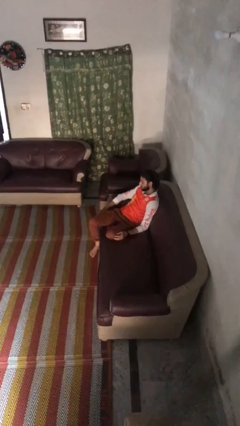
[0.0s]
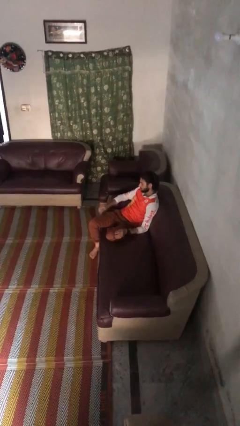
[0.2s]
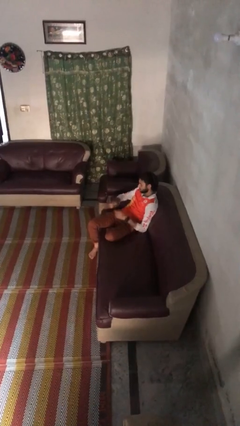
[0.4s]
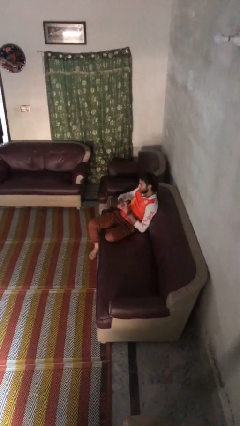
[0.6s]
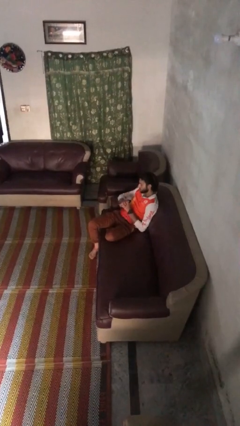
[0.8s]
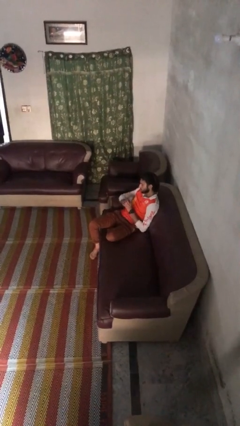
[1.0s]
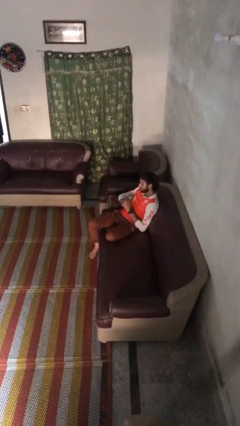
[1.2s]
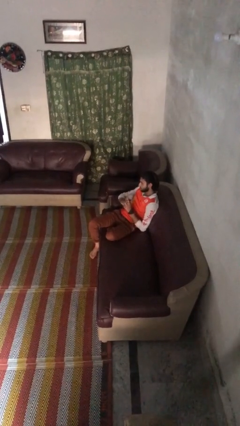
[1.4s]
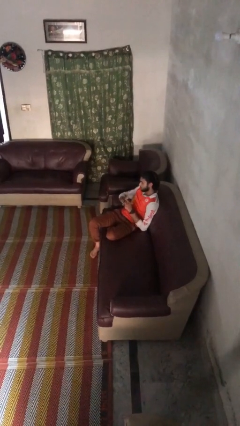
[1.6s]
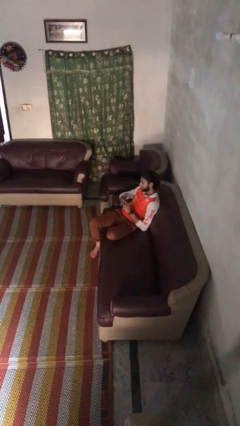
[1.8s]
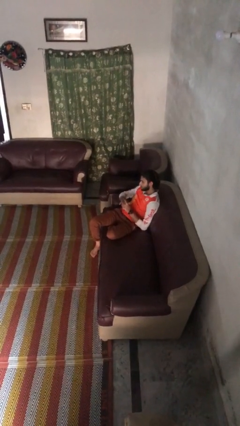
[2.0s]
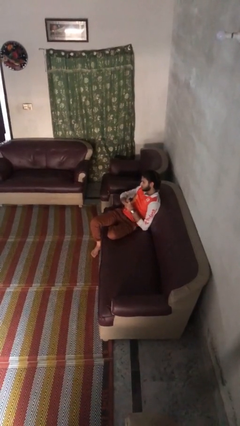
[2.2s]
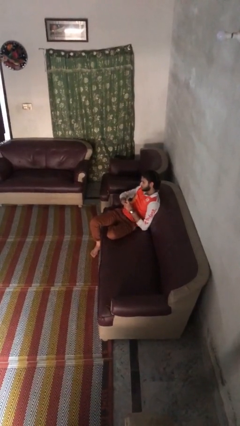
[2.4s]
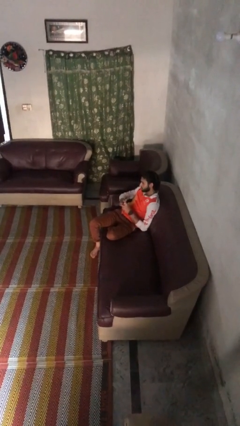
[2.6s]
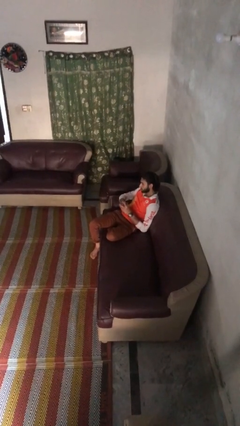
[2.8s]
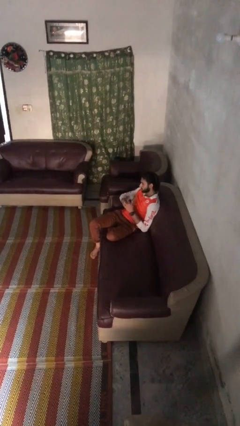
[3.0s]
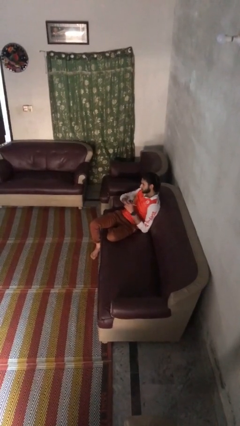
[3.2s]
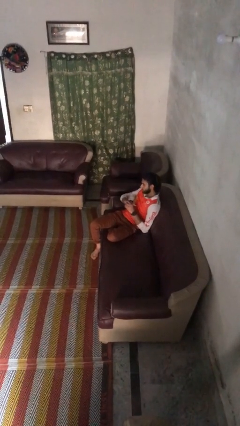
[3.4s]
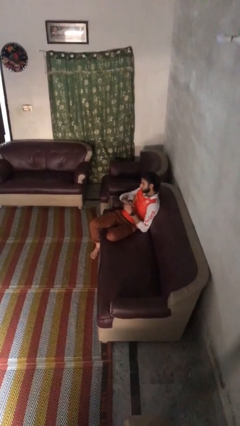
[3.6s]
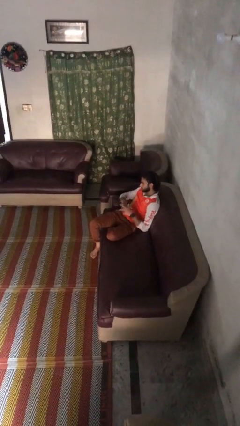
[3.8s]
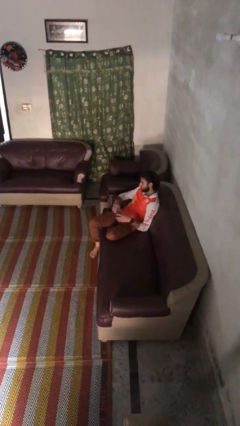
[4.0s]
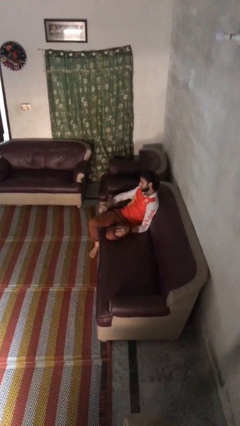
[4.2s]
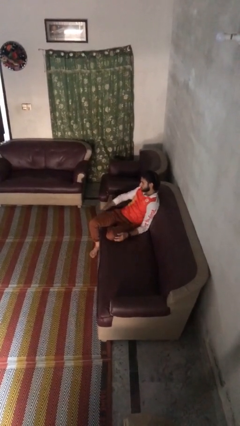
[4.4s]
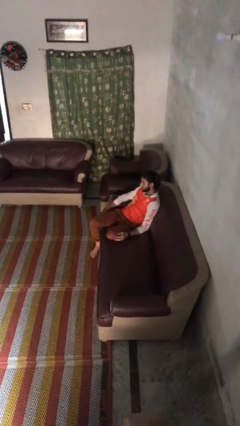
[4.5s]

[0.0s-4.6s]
person cracks knuckles

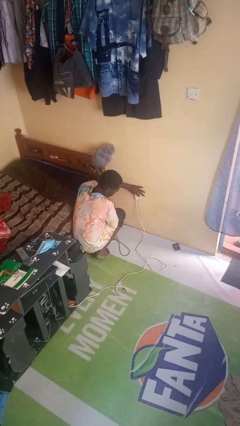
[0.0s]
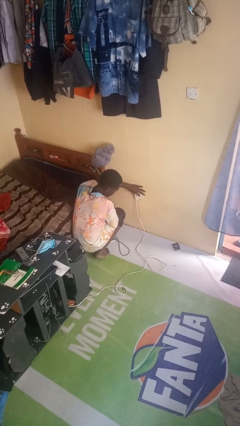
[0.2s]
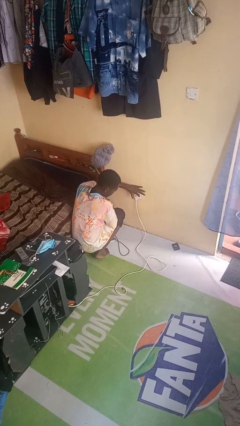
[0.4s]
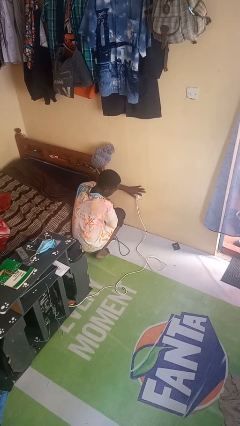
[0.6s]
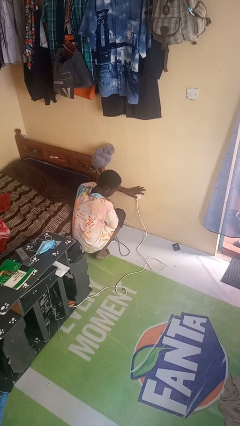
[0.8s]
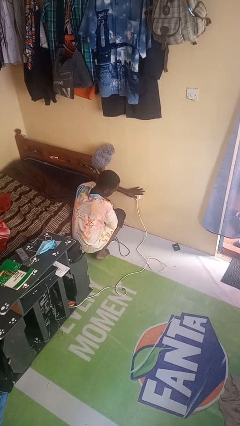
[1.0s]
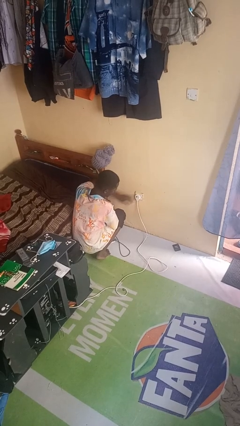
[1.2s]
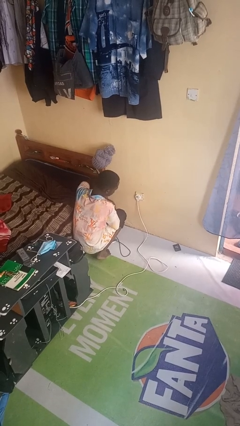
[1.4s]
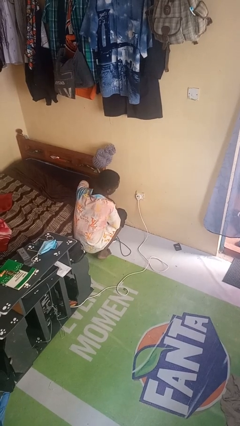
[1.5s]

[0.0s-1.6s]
person plugs into electrical socket

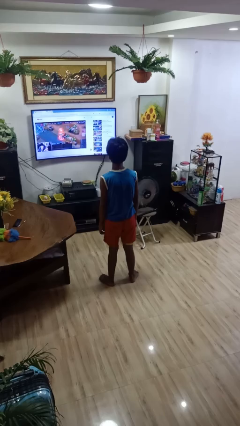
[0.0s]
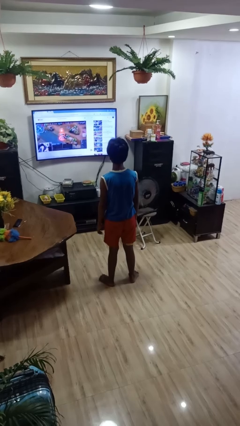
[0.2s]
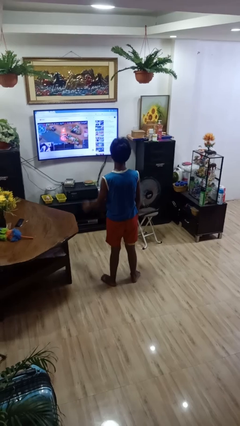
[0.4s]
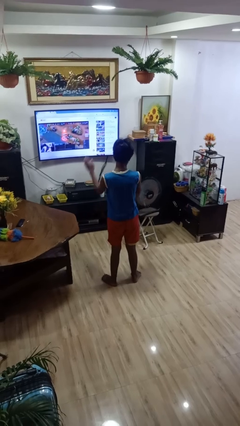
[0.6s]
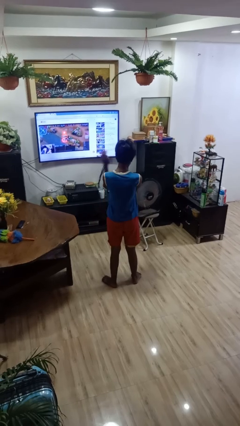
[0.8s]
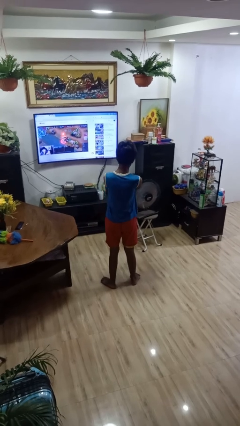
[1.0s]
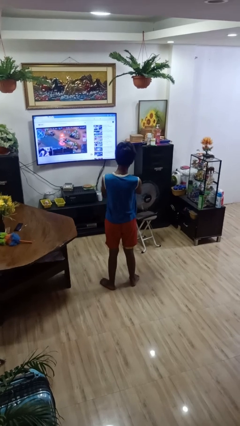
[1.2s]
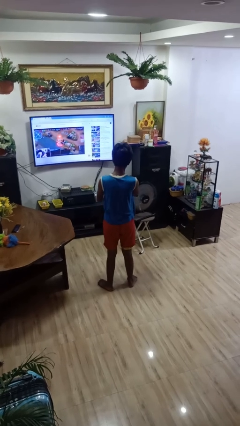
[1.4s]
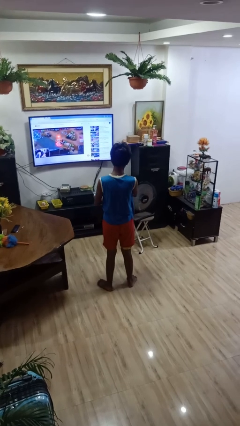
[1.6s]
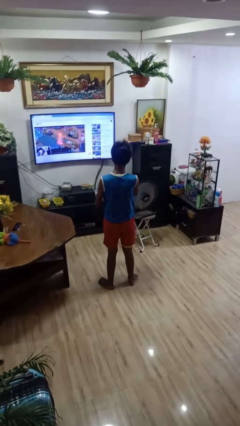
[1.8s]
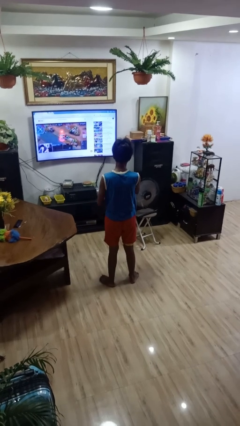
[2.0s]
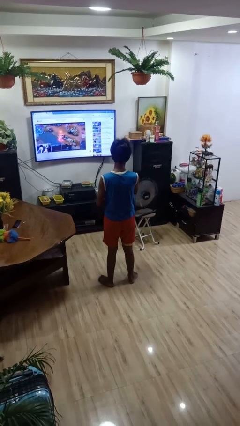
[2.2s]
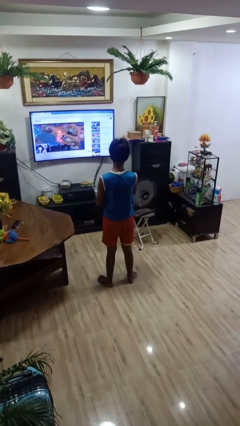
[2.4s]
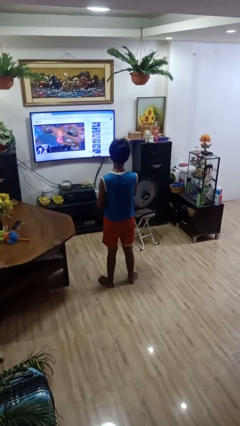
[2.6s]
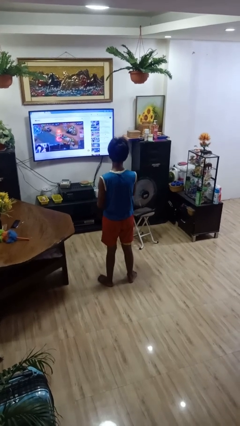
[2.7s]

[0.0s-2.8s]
person swats bug

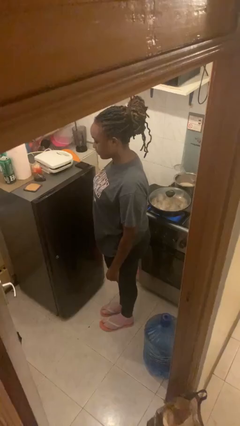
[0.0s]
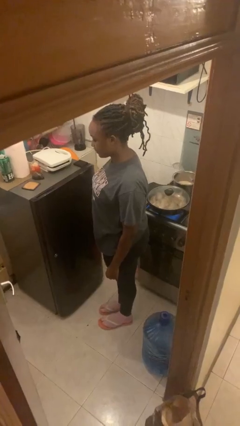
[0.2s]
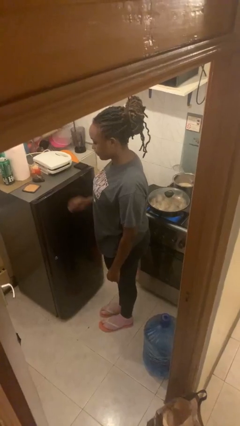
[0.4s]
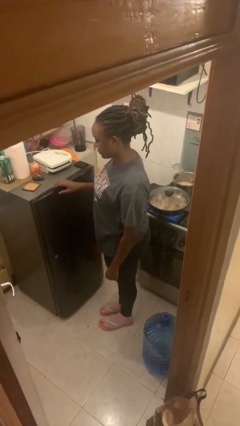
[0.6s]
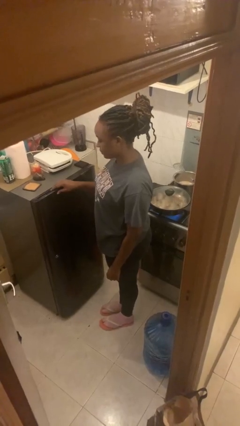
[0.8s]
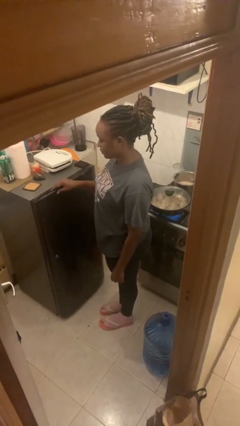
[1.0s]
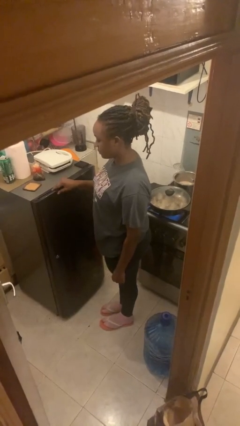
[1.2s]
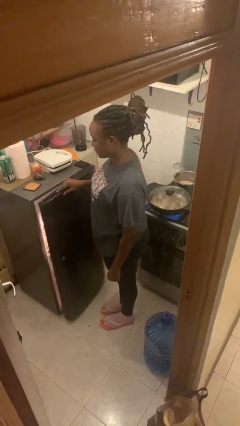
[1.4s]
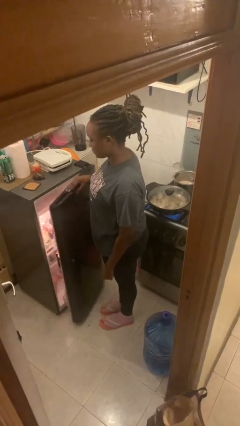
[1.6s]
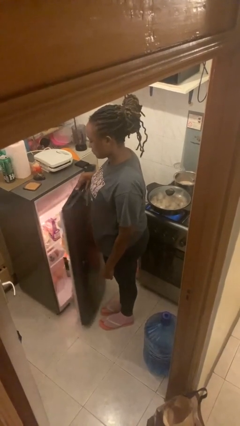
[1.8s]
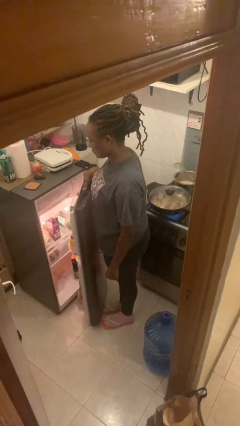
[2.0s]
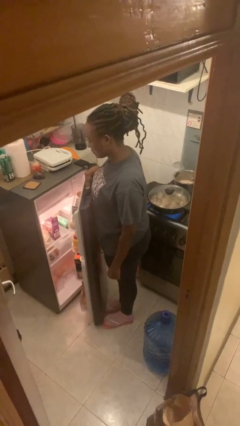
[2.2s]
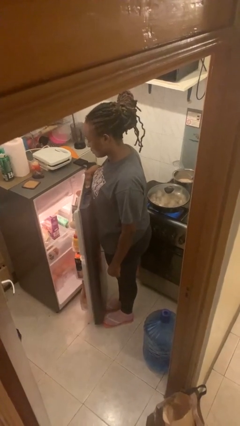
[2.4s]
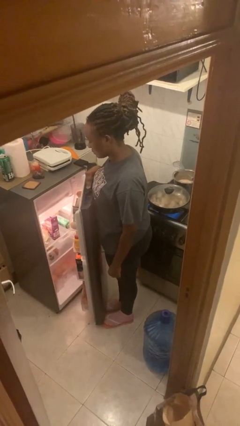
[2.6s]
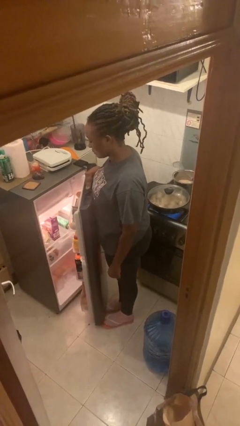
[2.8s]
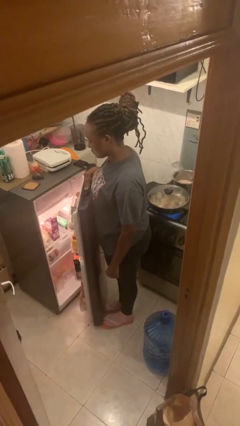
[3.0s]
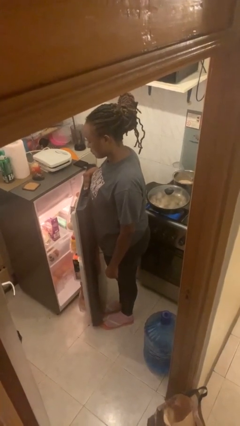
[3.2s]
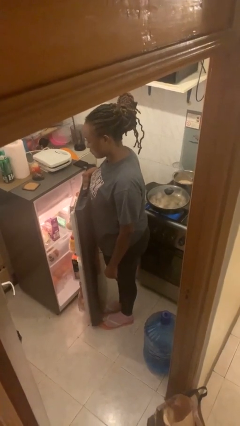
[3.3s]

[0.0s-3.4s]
person opens refrigerator

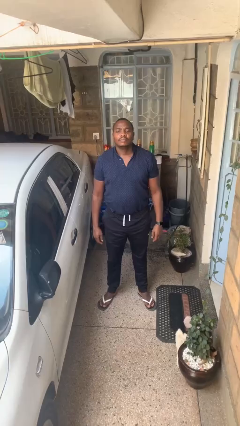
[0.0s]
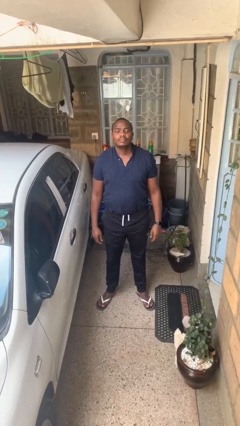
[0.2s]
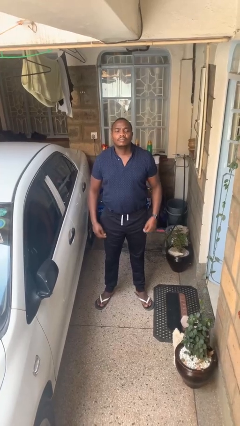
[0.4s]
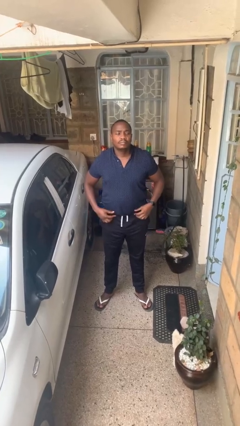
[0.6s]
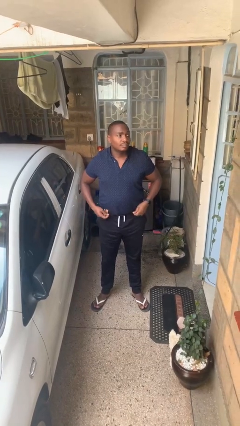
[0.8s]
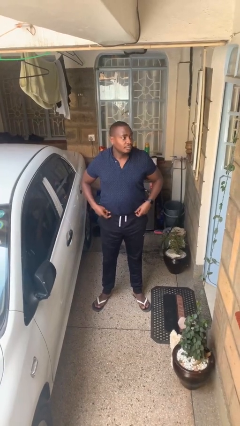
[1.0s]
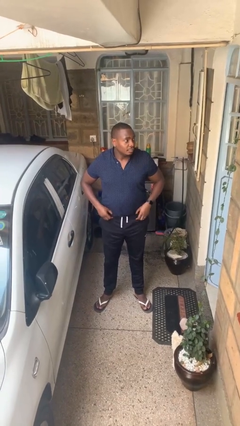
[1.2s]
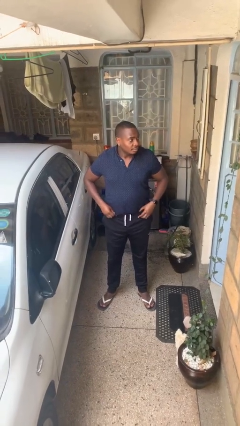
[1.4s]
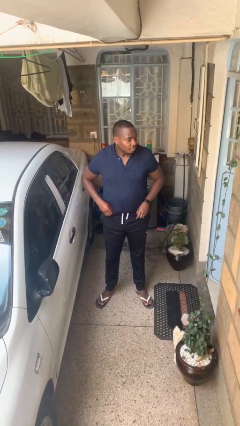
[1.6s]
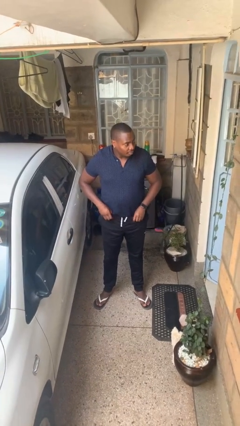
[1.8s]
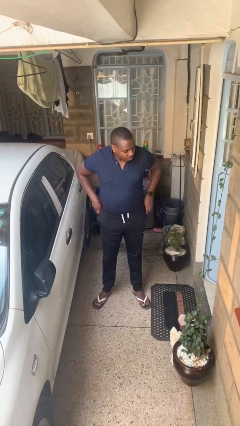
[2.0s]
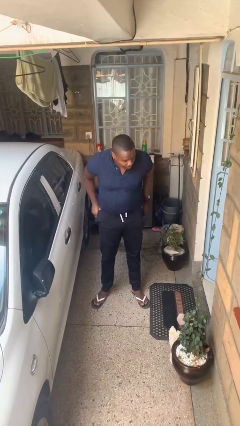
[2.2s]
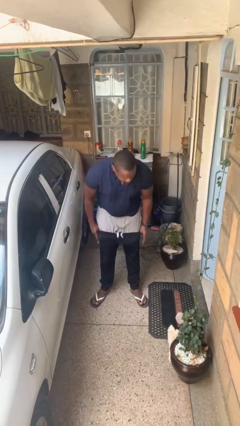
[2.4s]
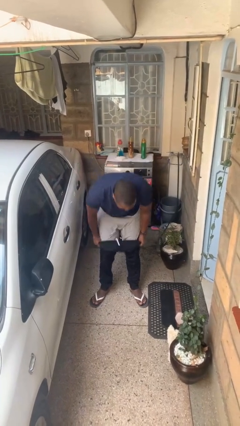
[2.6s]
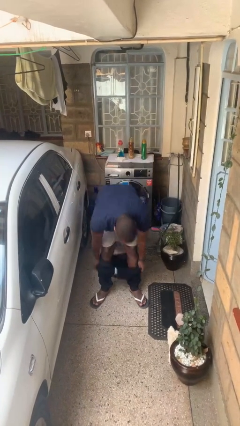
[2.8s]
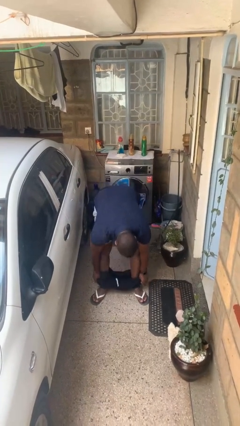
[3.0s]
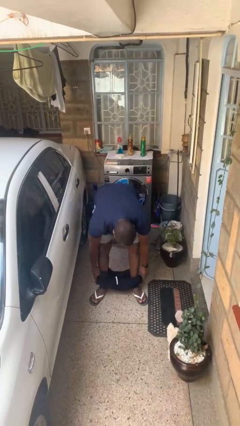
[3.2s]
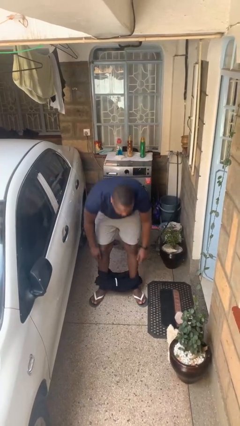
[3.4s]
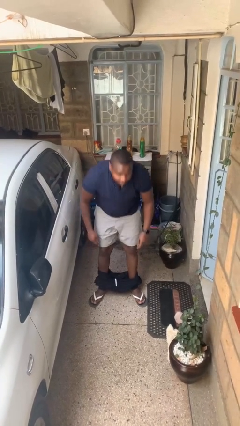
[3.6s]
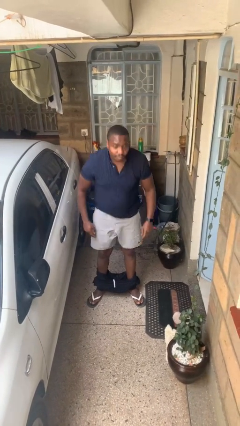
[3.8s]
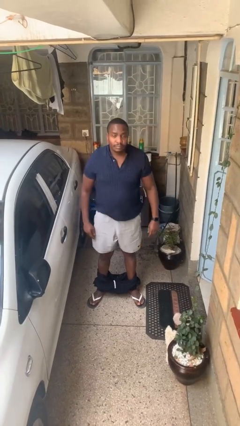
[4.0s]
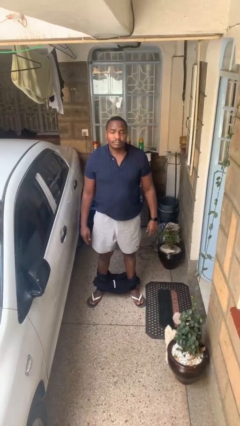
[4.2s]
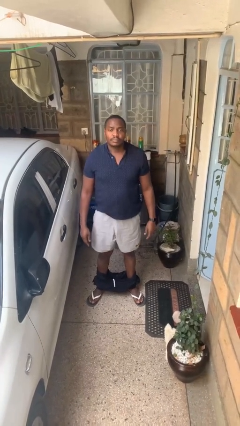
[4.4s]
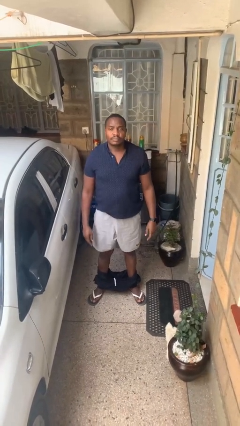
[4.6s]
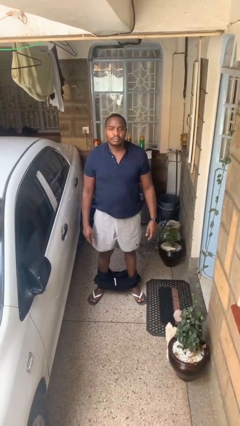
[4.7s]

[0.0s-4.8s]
person takes off pants
